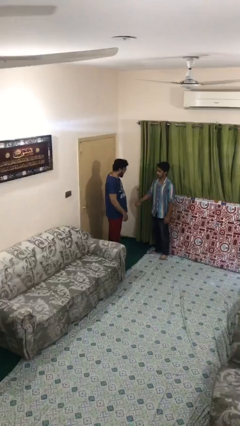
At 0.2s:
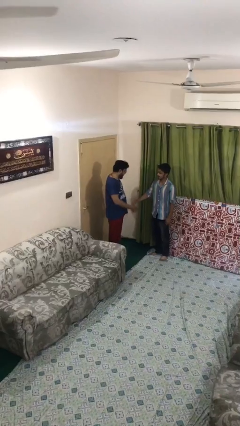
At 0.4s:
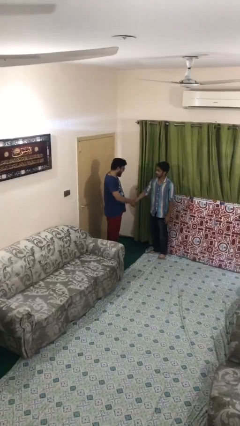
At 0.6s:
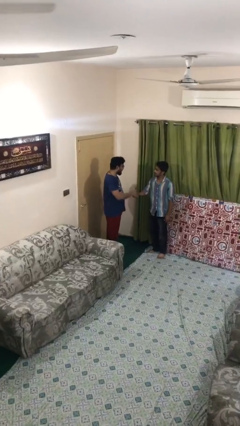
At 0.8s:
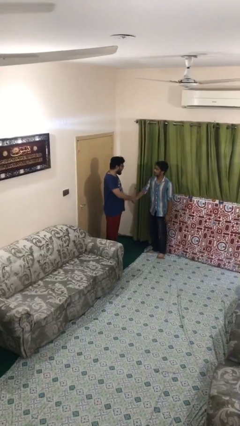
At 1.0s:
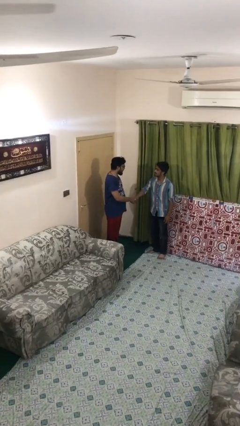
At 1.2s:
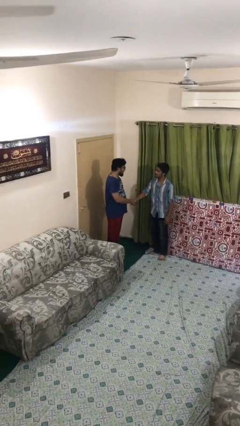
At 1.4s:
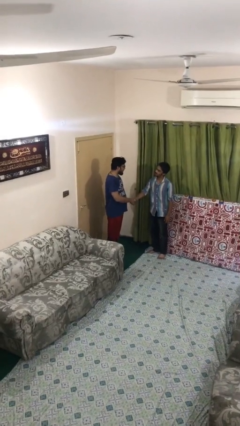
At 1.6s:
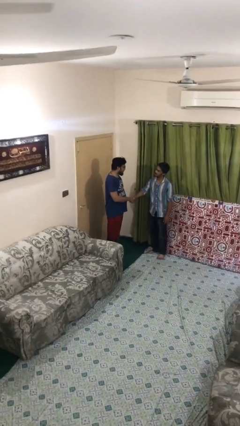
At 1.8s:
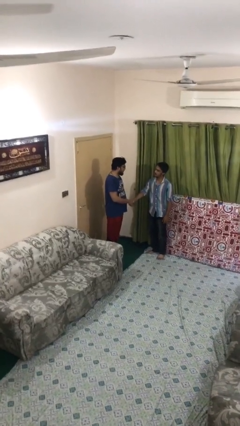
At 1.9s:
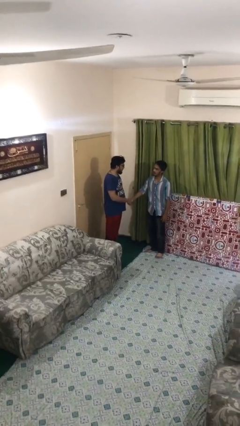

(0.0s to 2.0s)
person shakes hand

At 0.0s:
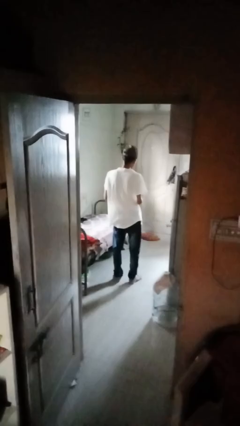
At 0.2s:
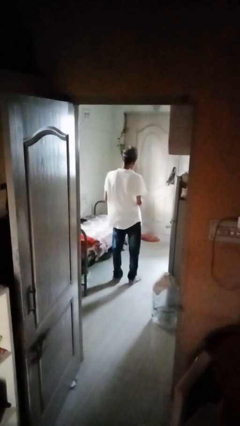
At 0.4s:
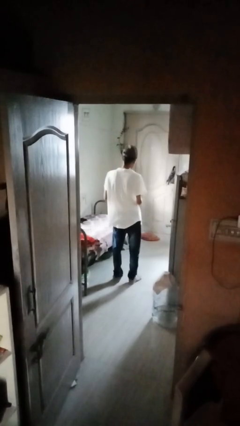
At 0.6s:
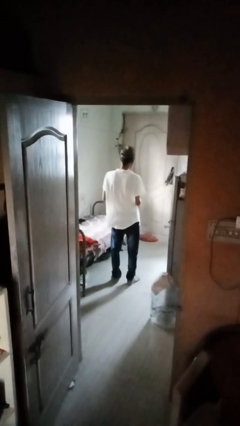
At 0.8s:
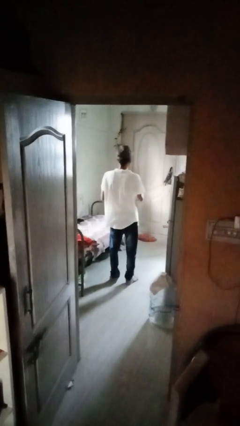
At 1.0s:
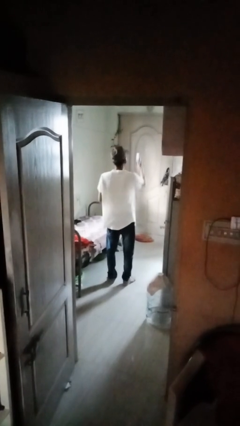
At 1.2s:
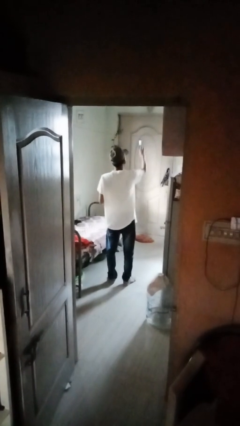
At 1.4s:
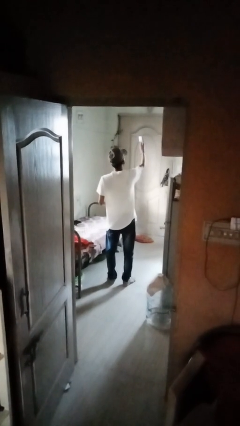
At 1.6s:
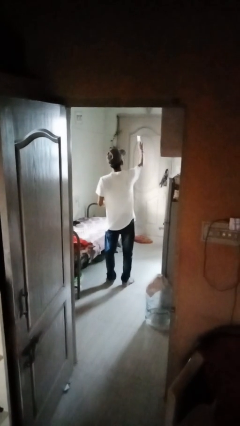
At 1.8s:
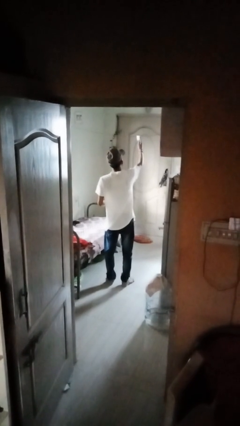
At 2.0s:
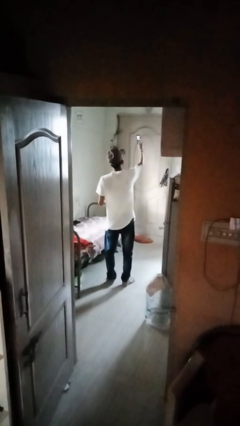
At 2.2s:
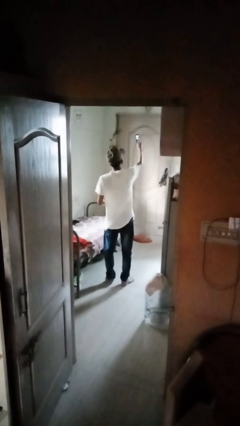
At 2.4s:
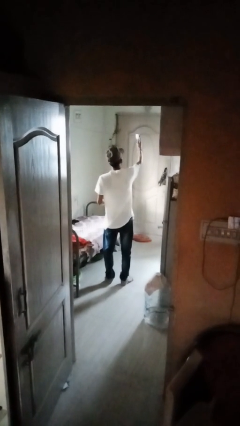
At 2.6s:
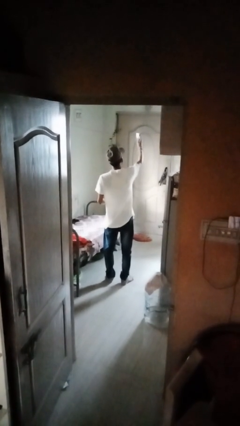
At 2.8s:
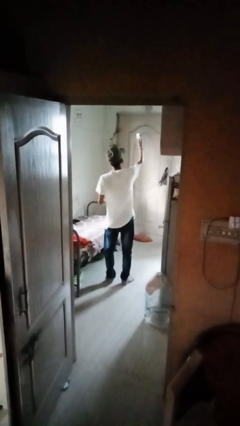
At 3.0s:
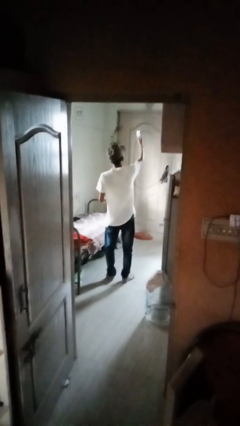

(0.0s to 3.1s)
person takes selfie

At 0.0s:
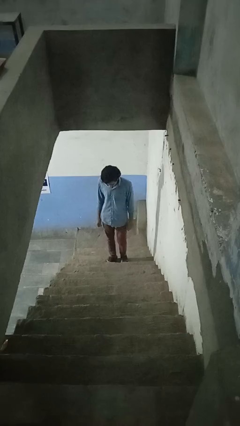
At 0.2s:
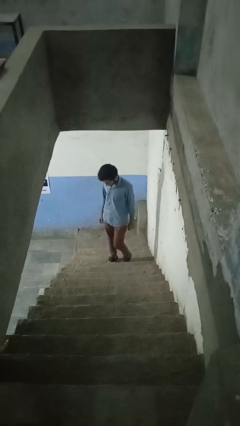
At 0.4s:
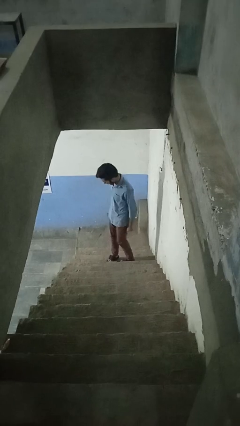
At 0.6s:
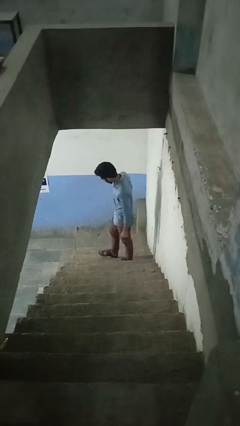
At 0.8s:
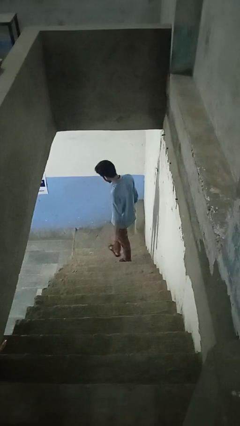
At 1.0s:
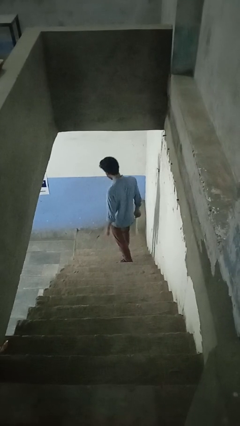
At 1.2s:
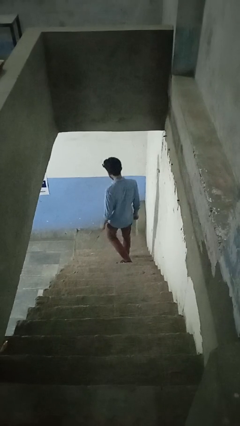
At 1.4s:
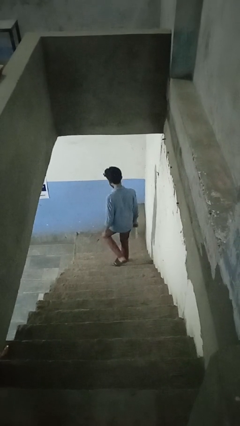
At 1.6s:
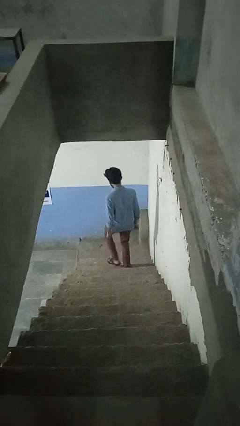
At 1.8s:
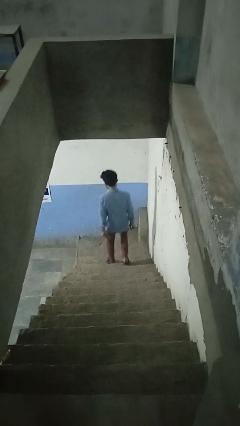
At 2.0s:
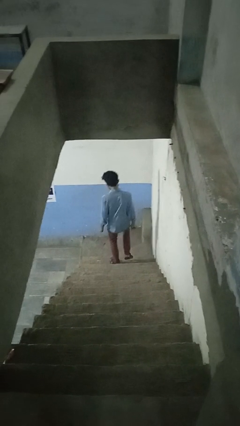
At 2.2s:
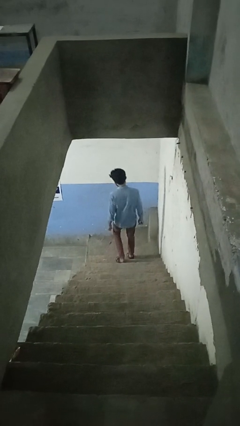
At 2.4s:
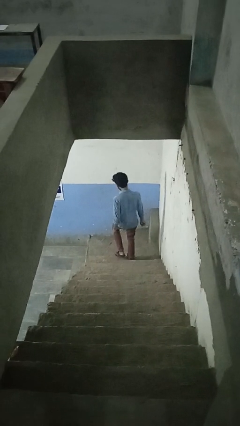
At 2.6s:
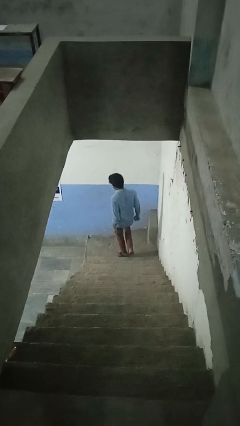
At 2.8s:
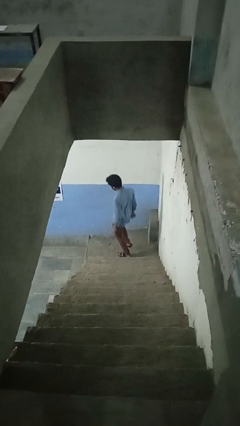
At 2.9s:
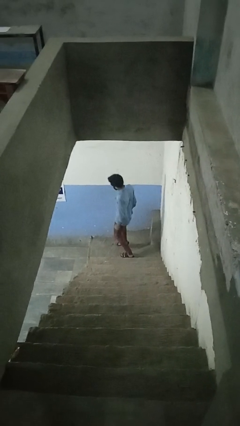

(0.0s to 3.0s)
person climbs down stairs

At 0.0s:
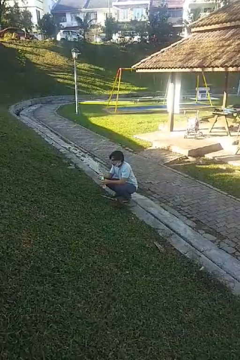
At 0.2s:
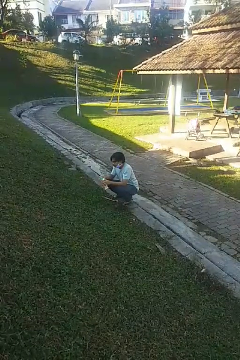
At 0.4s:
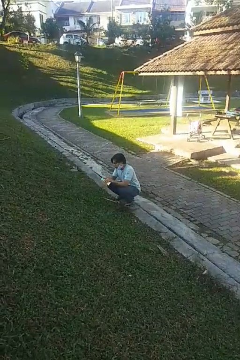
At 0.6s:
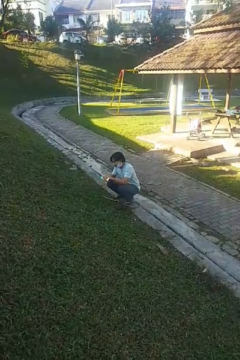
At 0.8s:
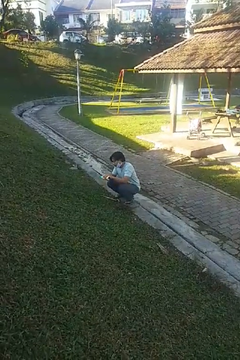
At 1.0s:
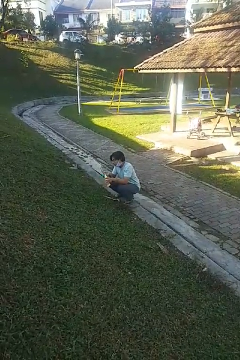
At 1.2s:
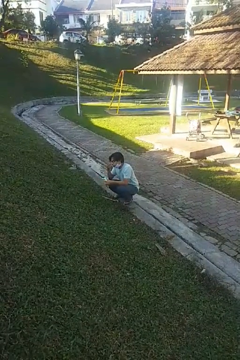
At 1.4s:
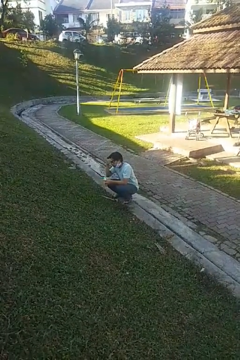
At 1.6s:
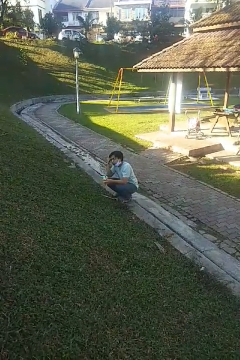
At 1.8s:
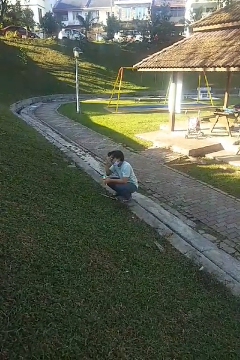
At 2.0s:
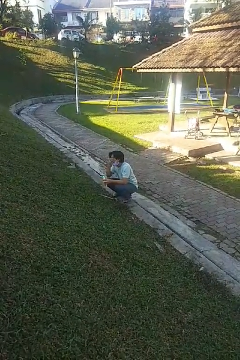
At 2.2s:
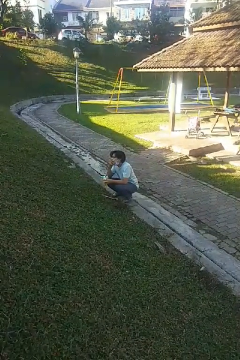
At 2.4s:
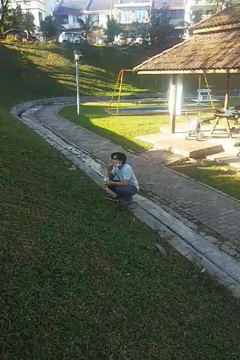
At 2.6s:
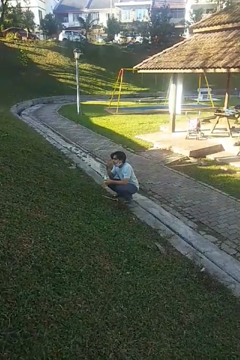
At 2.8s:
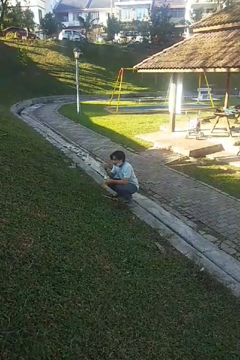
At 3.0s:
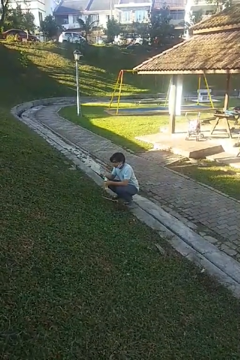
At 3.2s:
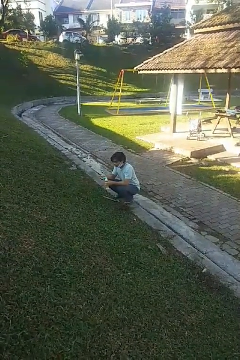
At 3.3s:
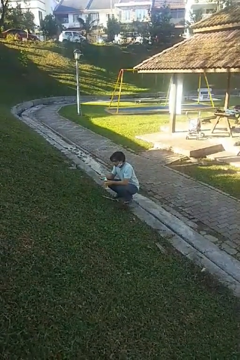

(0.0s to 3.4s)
person applies facial moisturizer

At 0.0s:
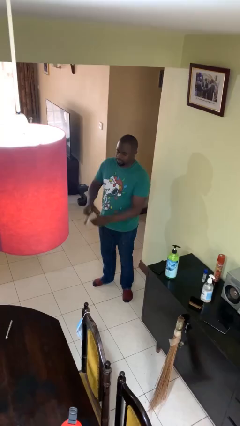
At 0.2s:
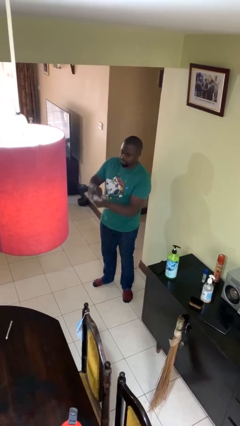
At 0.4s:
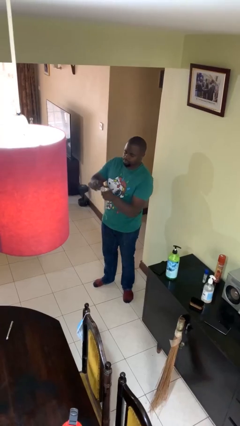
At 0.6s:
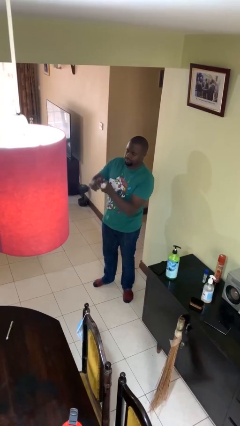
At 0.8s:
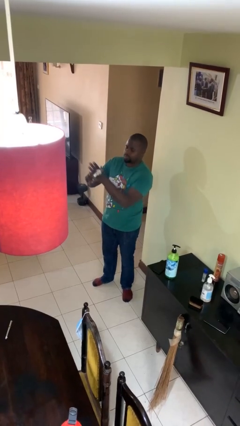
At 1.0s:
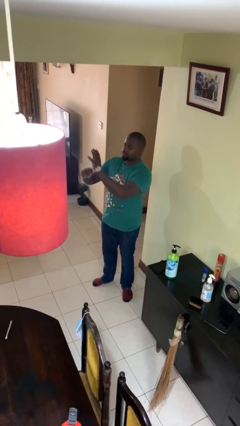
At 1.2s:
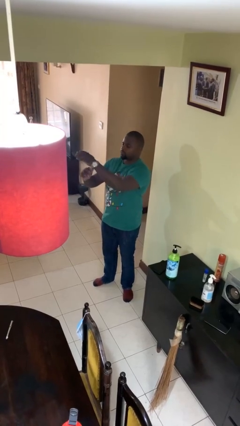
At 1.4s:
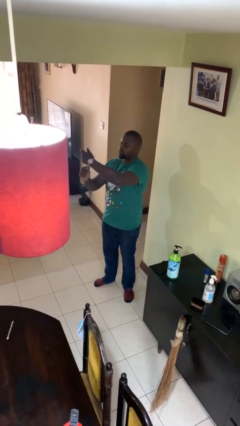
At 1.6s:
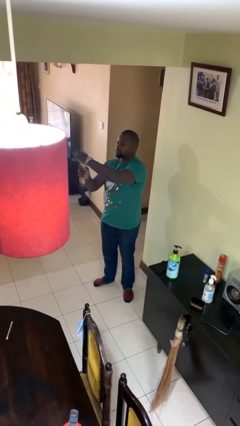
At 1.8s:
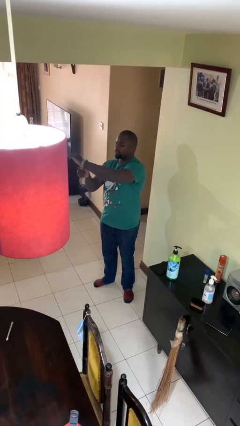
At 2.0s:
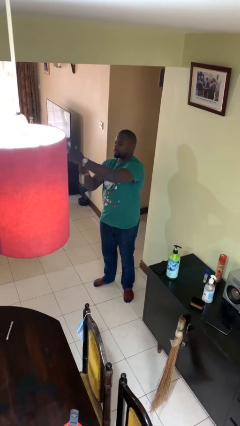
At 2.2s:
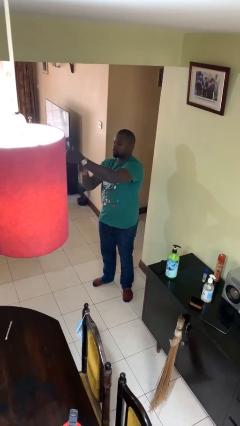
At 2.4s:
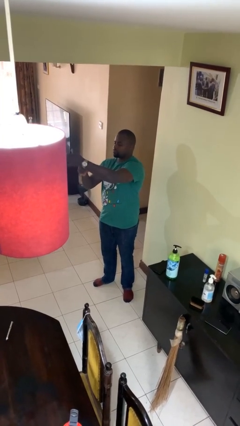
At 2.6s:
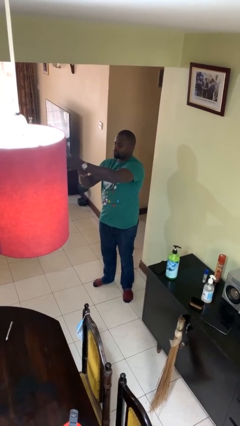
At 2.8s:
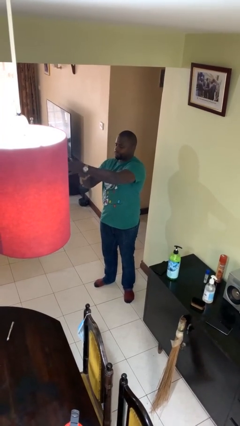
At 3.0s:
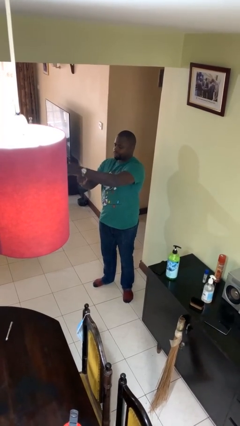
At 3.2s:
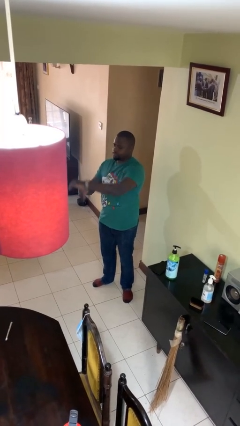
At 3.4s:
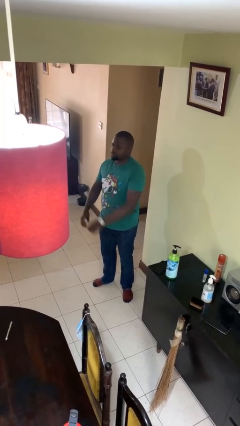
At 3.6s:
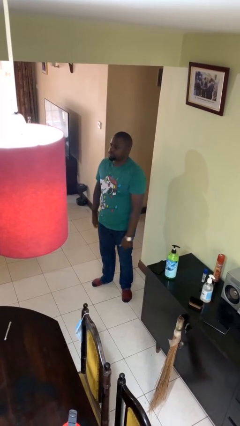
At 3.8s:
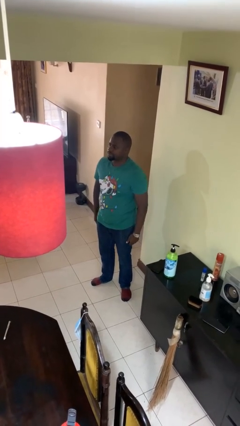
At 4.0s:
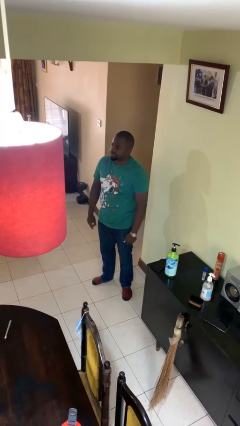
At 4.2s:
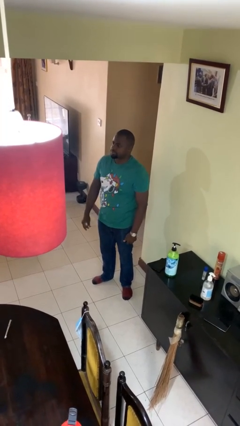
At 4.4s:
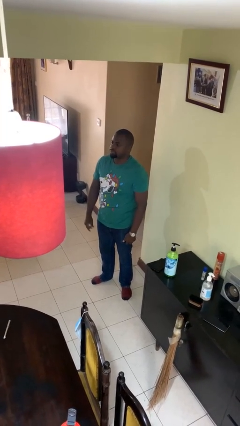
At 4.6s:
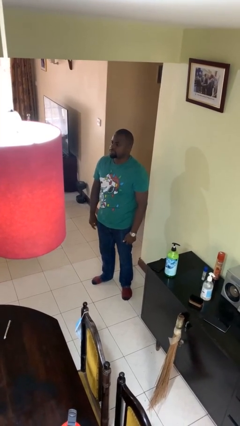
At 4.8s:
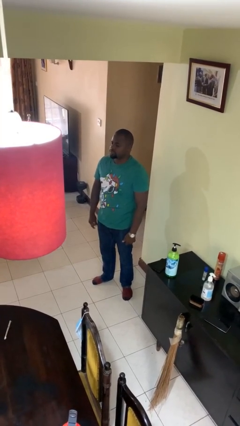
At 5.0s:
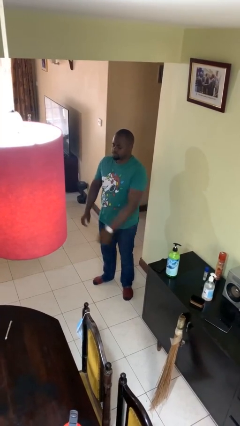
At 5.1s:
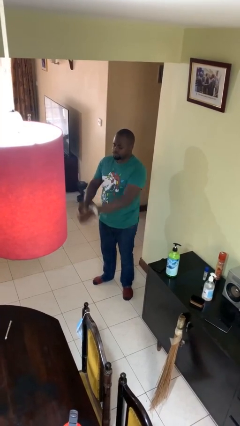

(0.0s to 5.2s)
person puts on wristwatch

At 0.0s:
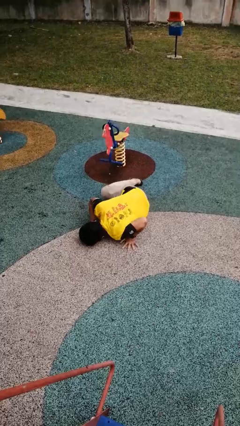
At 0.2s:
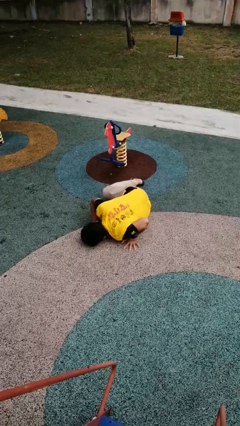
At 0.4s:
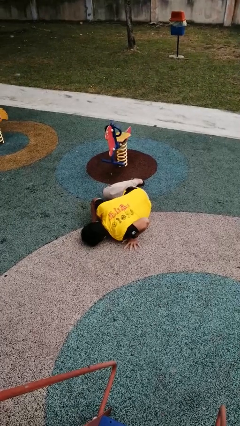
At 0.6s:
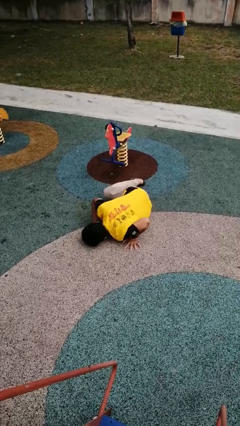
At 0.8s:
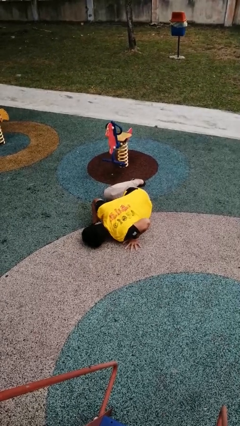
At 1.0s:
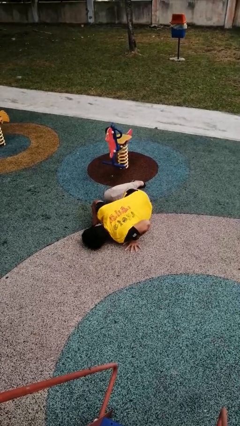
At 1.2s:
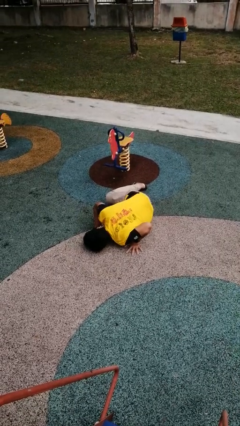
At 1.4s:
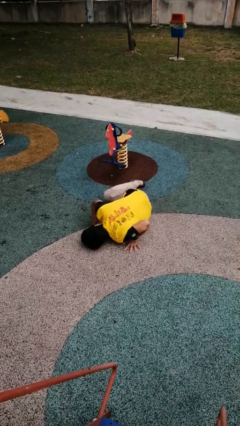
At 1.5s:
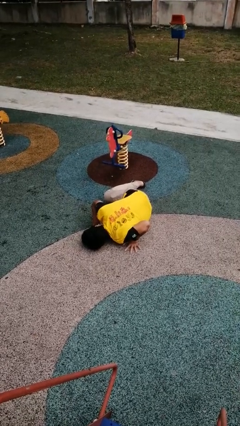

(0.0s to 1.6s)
person lies down on floor

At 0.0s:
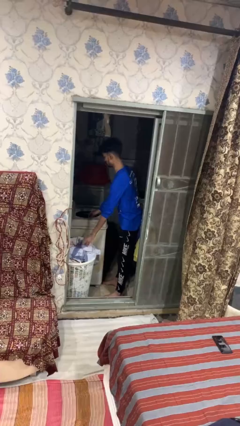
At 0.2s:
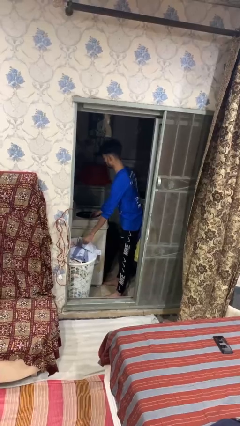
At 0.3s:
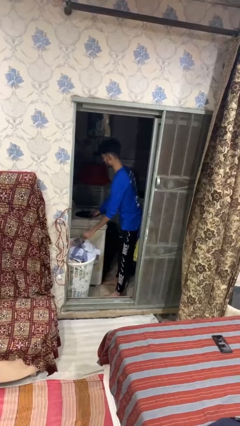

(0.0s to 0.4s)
person unloads dryer
